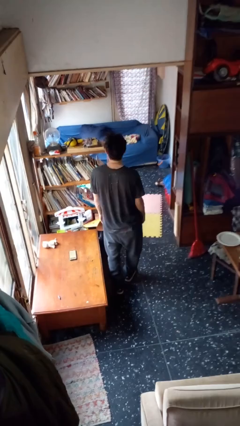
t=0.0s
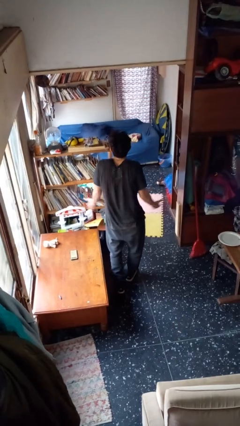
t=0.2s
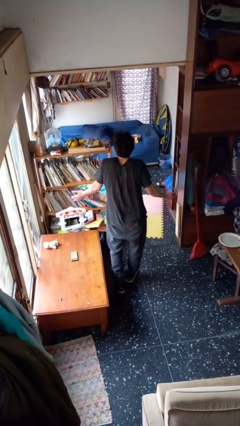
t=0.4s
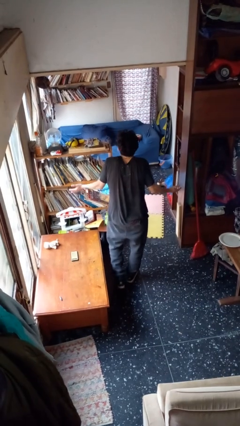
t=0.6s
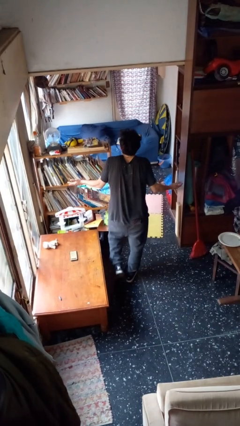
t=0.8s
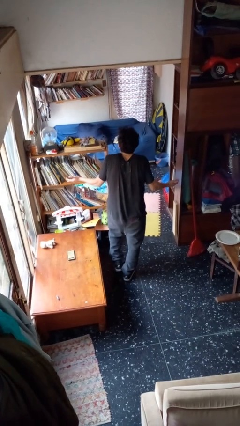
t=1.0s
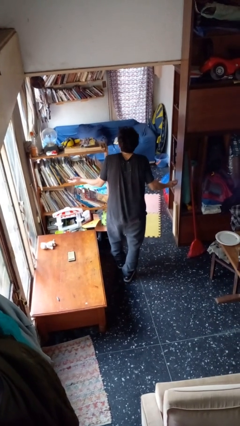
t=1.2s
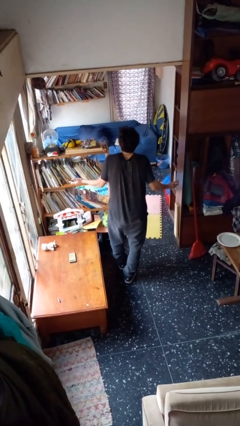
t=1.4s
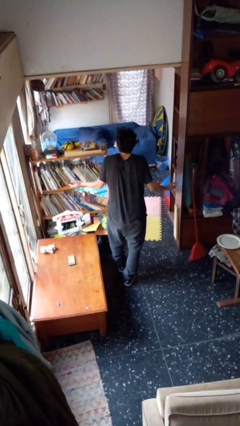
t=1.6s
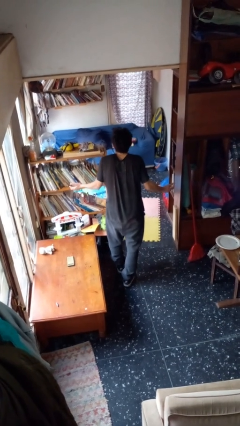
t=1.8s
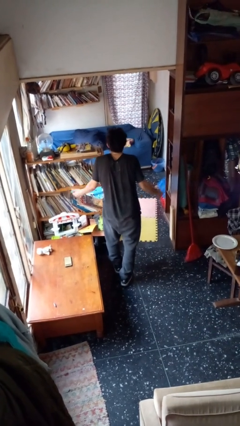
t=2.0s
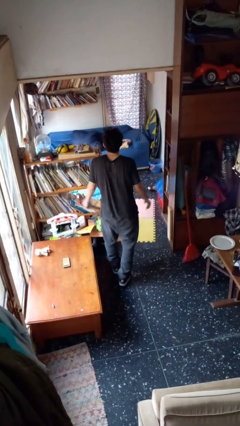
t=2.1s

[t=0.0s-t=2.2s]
person shrugs

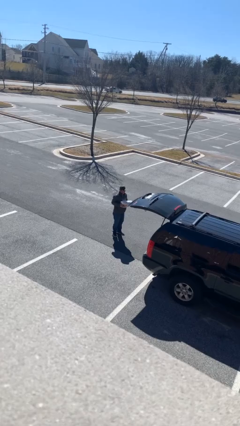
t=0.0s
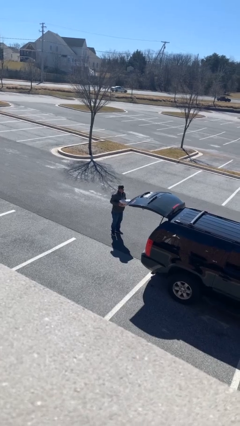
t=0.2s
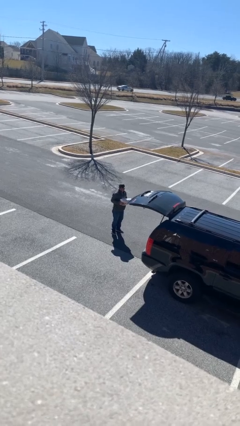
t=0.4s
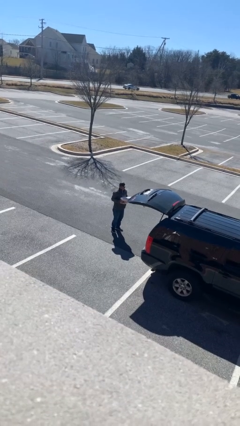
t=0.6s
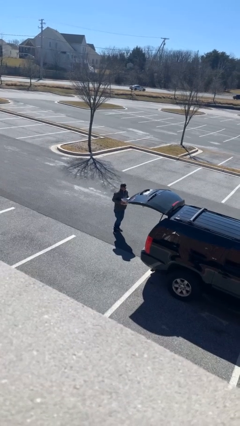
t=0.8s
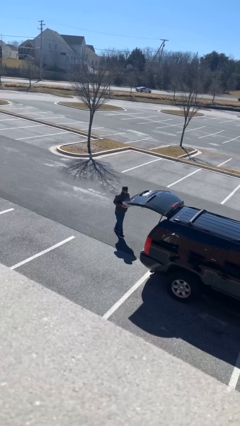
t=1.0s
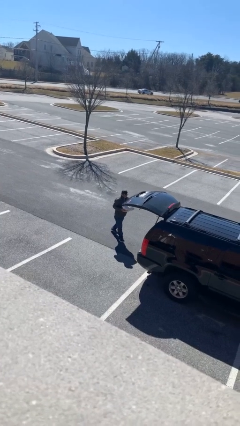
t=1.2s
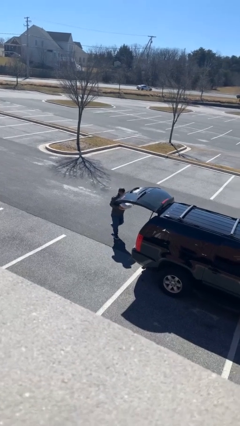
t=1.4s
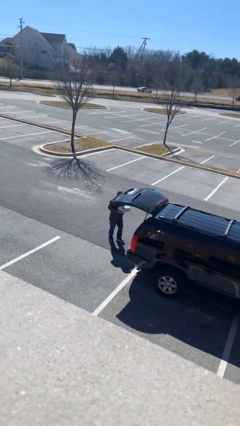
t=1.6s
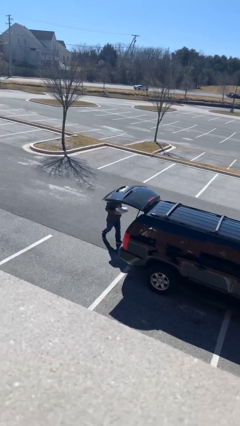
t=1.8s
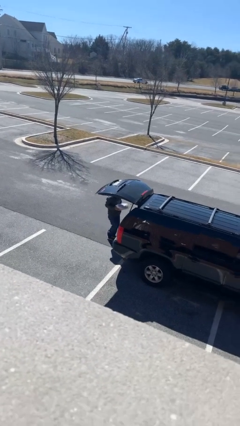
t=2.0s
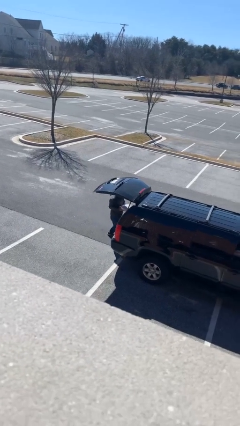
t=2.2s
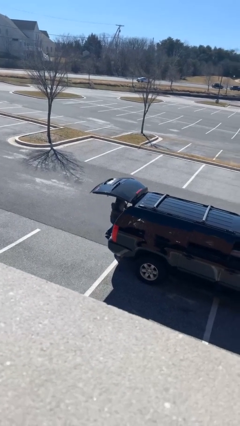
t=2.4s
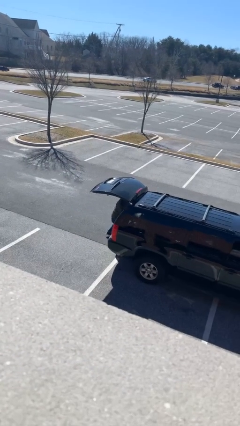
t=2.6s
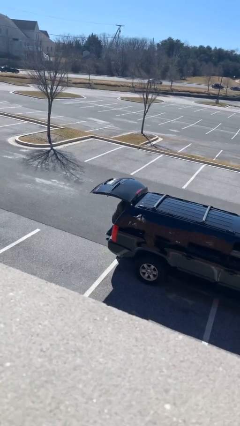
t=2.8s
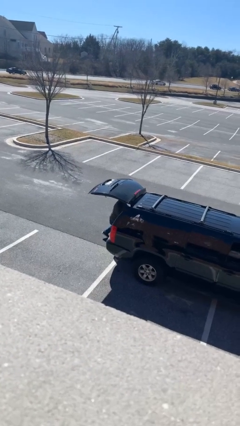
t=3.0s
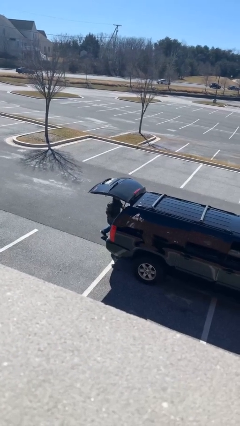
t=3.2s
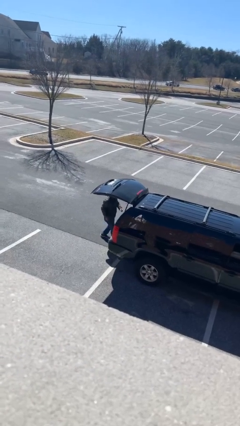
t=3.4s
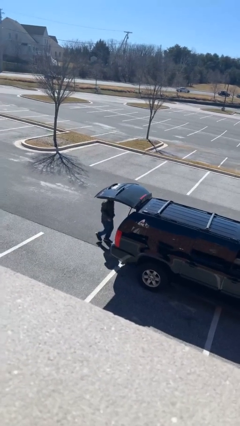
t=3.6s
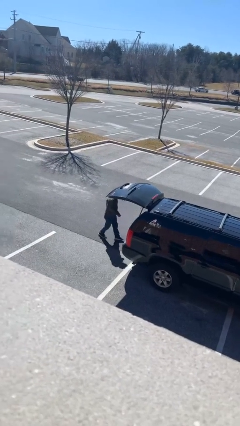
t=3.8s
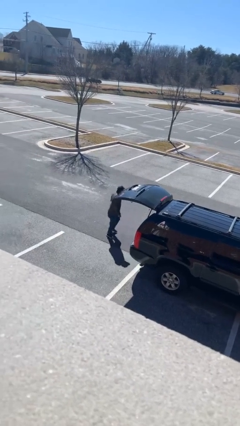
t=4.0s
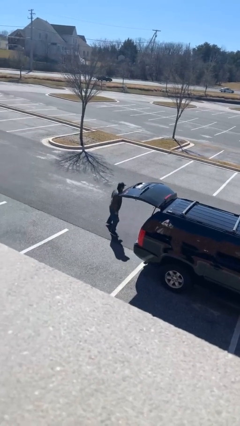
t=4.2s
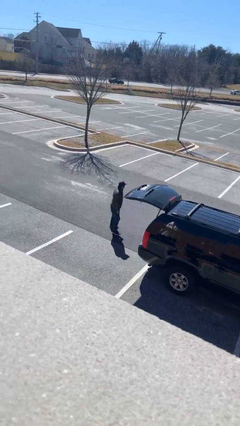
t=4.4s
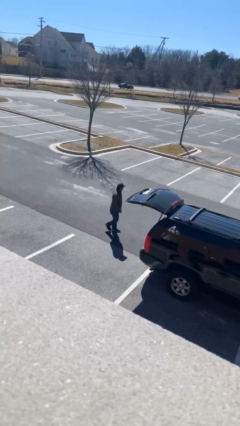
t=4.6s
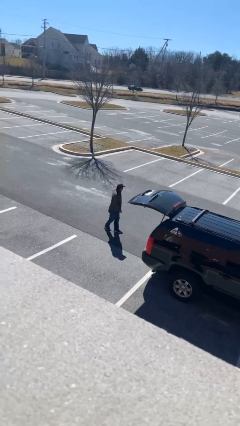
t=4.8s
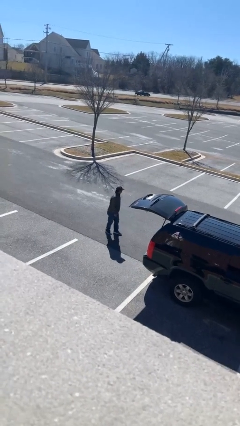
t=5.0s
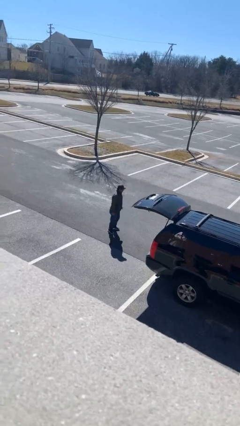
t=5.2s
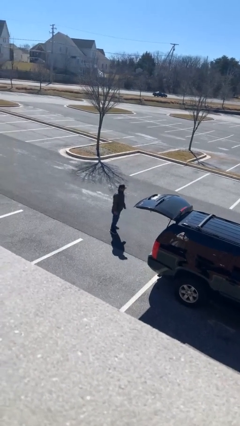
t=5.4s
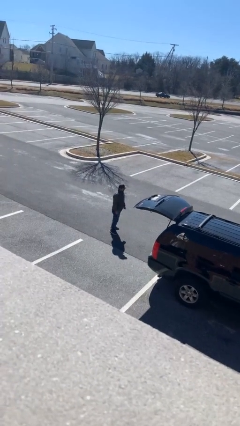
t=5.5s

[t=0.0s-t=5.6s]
person loads car

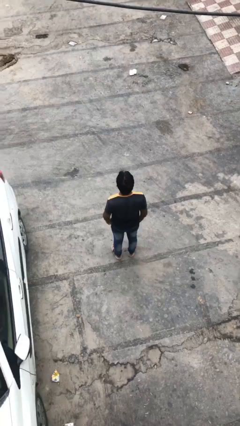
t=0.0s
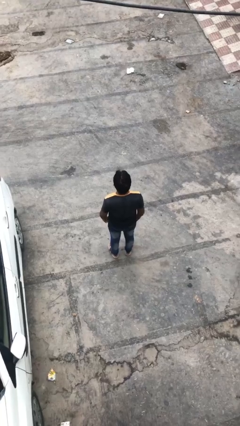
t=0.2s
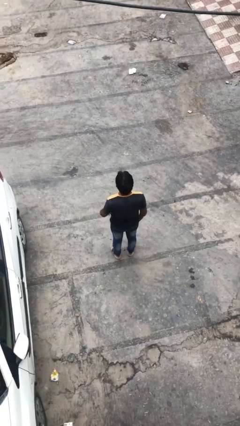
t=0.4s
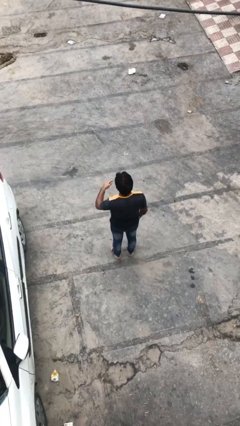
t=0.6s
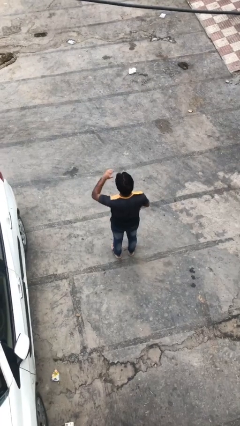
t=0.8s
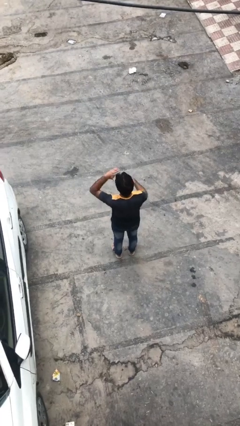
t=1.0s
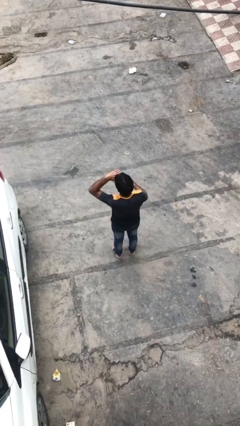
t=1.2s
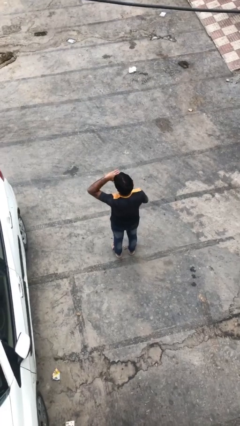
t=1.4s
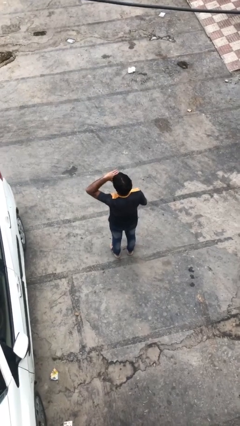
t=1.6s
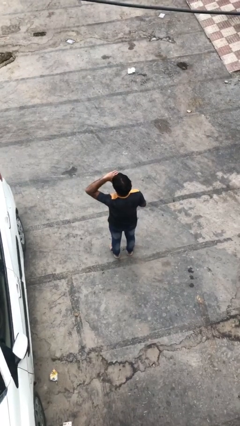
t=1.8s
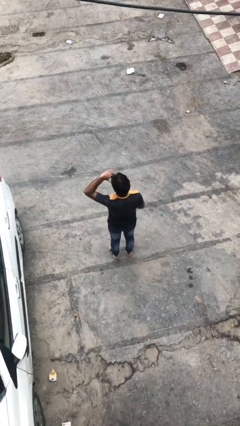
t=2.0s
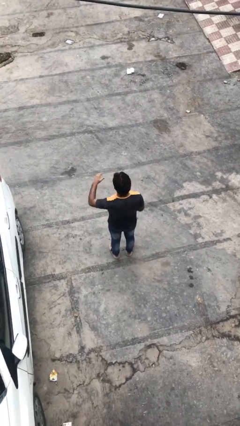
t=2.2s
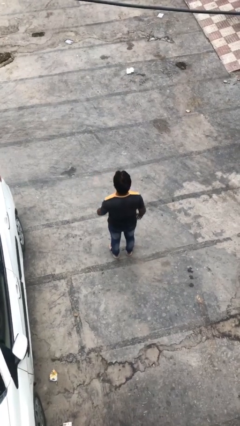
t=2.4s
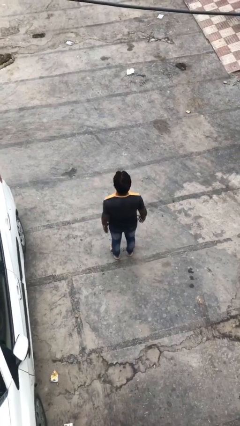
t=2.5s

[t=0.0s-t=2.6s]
person shades eyes

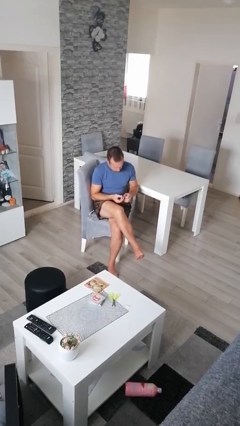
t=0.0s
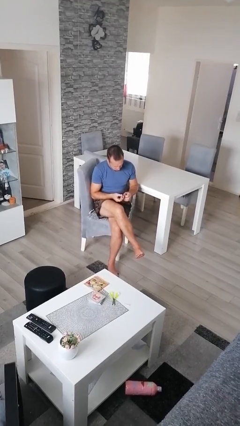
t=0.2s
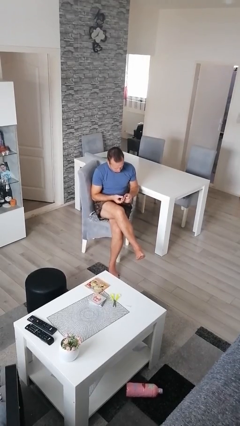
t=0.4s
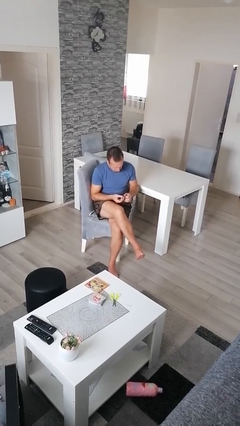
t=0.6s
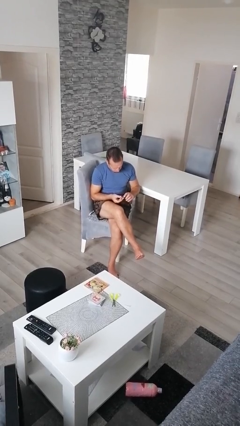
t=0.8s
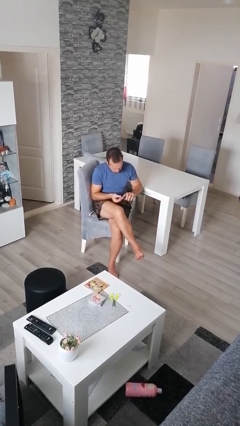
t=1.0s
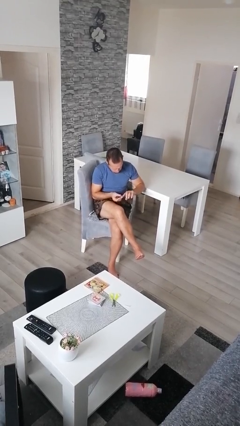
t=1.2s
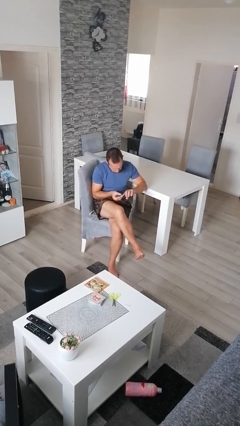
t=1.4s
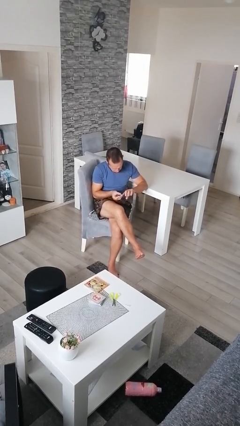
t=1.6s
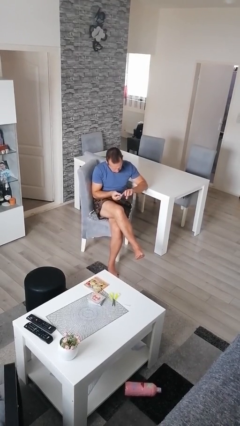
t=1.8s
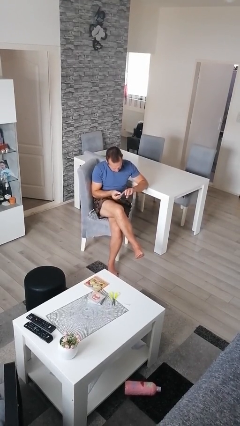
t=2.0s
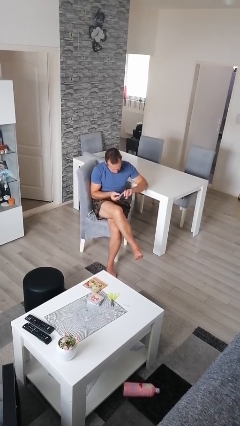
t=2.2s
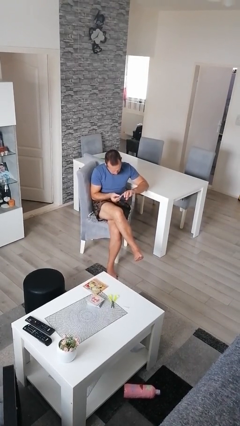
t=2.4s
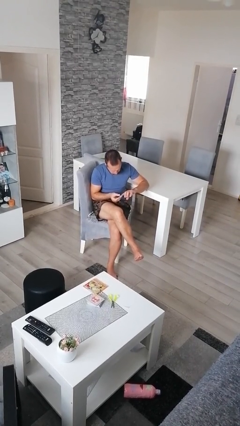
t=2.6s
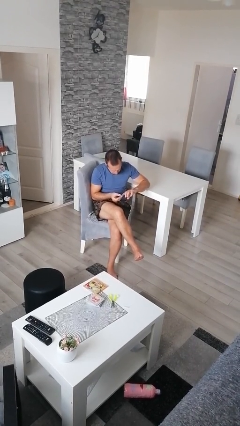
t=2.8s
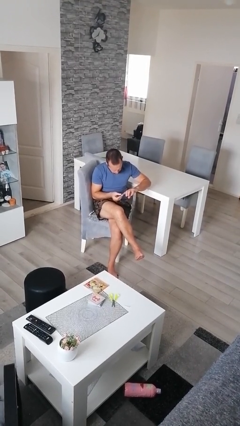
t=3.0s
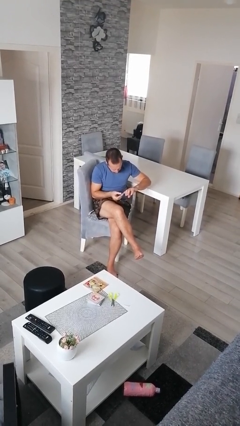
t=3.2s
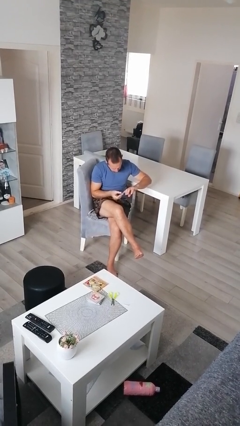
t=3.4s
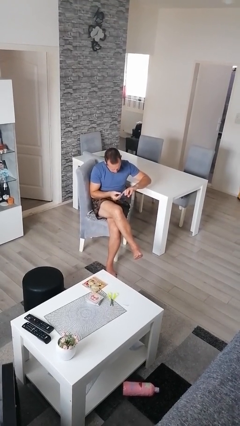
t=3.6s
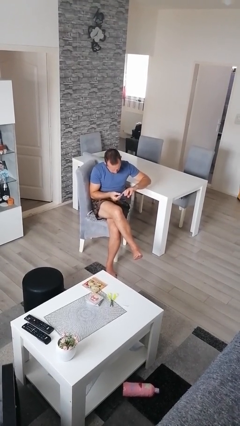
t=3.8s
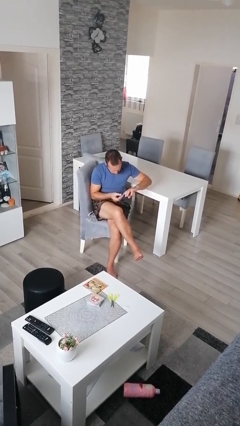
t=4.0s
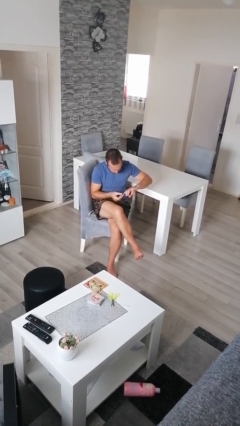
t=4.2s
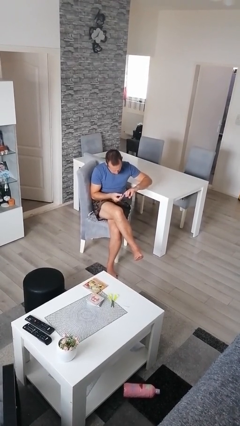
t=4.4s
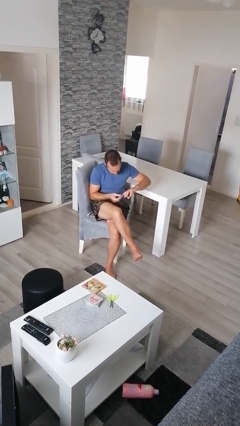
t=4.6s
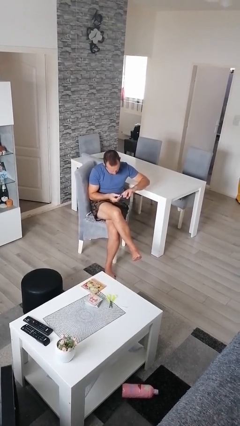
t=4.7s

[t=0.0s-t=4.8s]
person clips fingernails

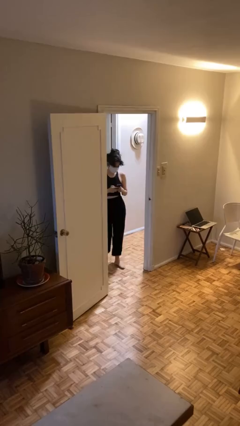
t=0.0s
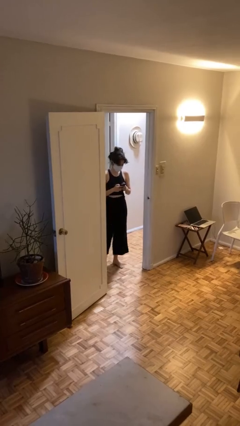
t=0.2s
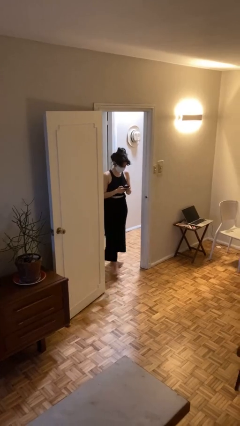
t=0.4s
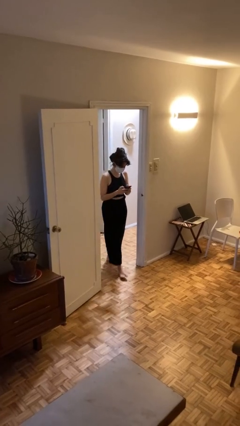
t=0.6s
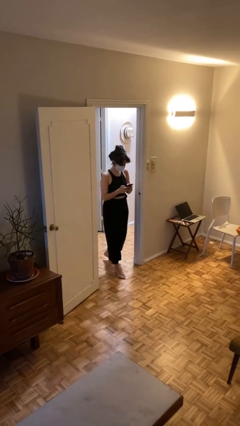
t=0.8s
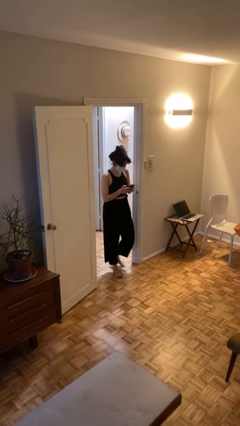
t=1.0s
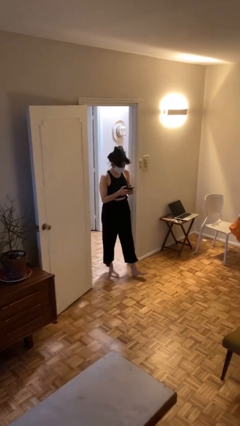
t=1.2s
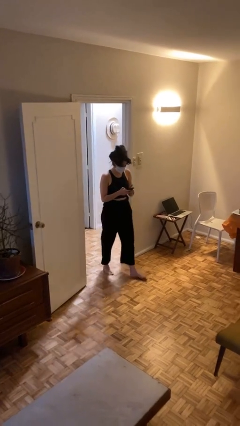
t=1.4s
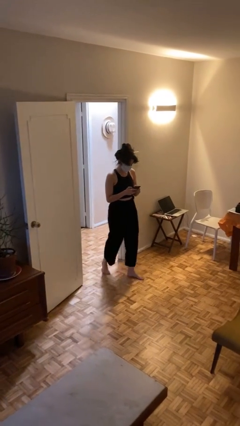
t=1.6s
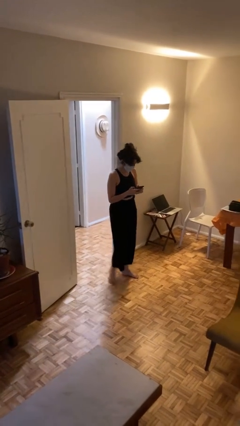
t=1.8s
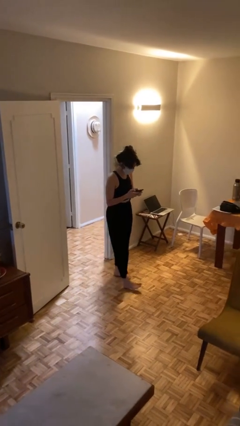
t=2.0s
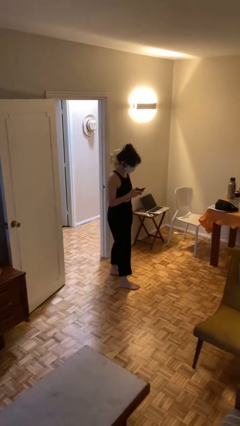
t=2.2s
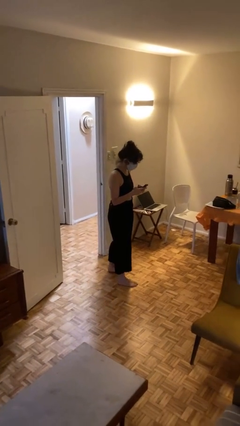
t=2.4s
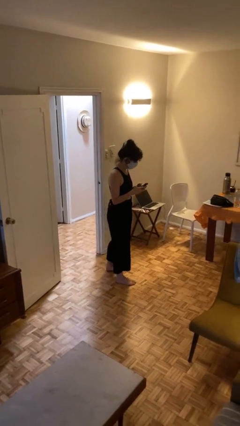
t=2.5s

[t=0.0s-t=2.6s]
person enters scene through structure
